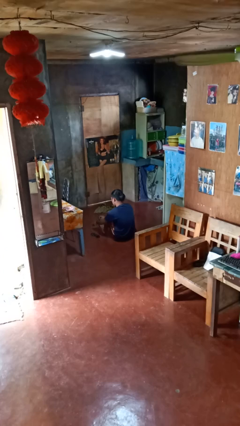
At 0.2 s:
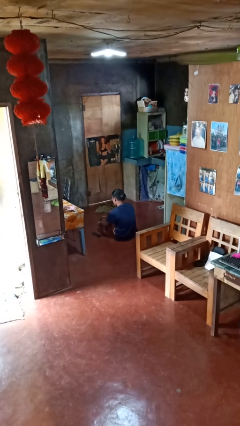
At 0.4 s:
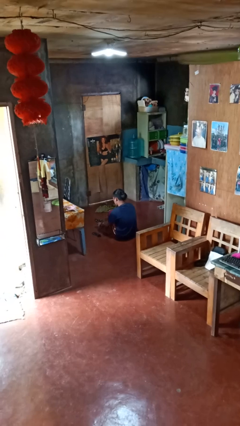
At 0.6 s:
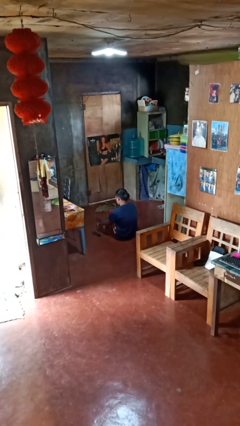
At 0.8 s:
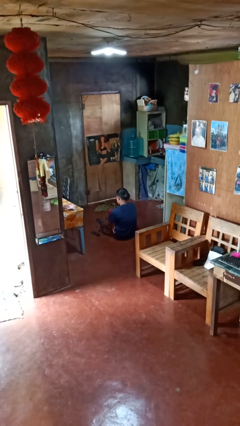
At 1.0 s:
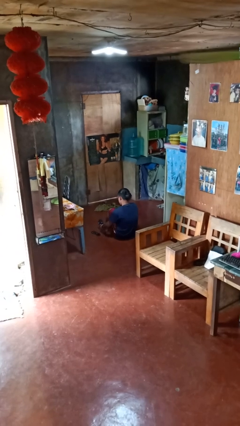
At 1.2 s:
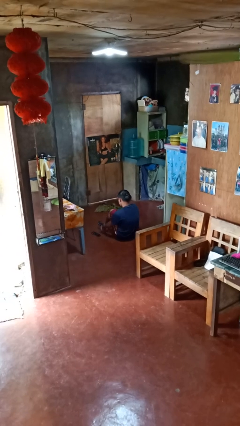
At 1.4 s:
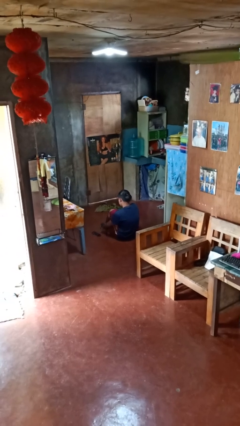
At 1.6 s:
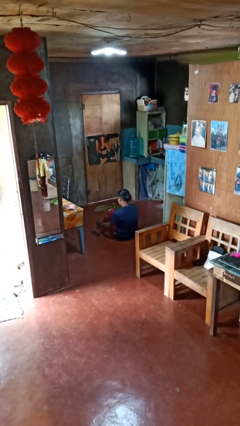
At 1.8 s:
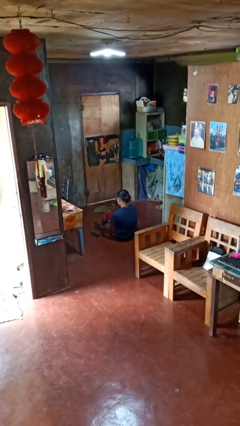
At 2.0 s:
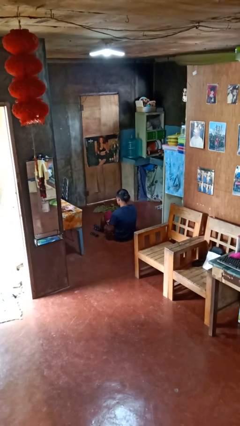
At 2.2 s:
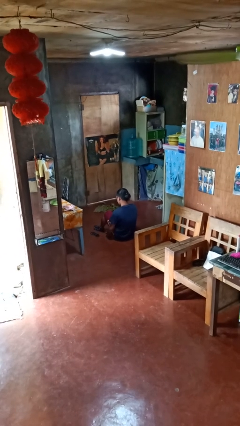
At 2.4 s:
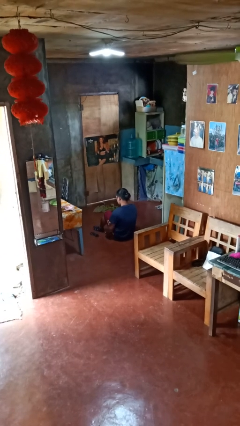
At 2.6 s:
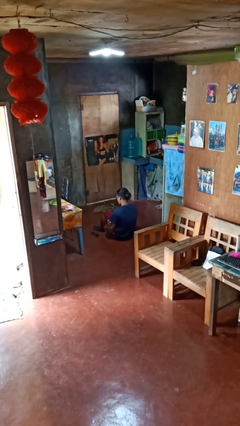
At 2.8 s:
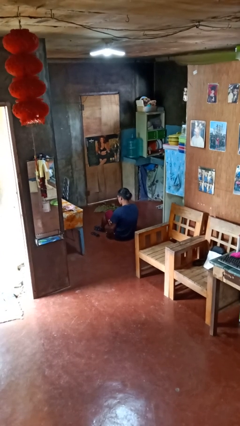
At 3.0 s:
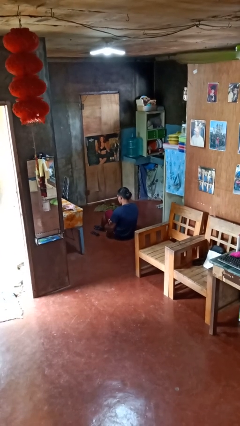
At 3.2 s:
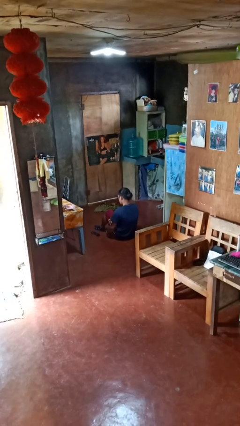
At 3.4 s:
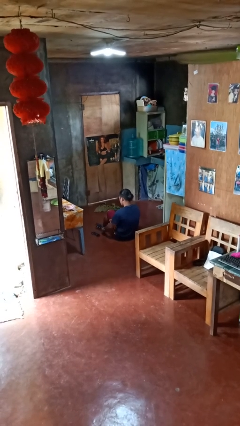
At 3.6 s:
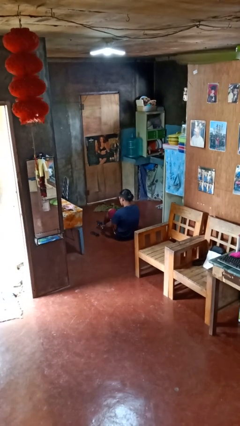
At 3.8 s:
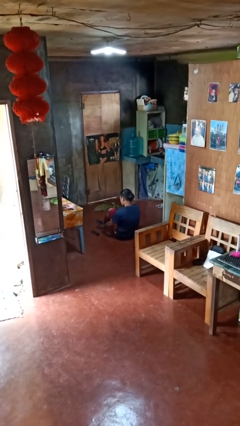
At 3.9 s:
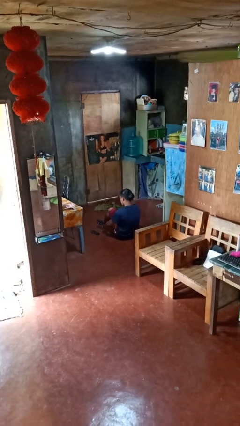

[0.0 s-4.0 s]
person puts on socks

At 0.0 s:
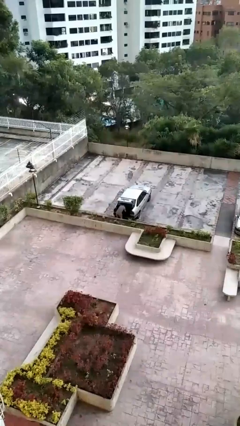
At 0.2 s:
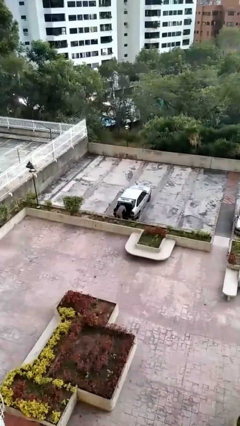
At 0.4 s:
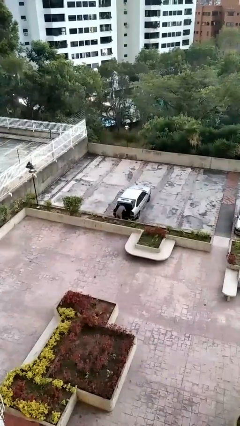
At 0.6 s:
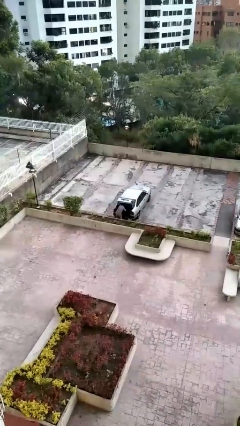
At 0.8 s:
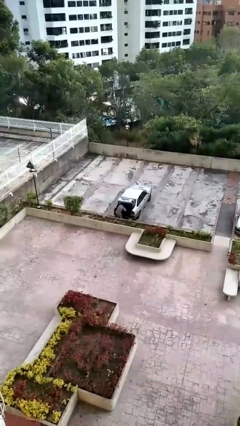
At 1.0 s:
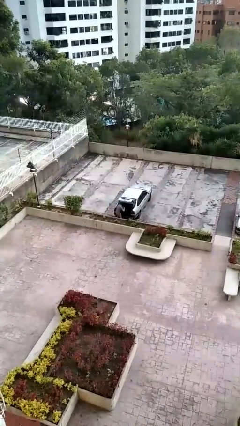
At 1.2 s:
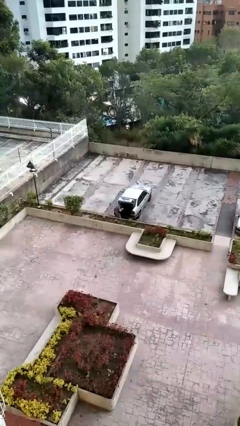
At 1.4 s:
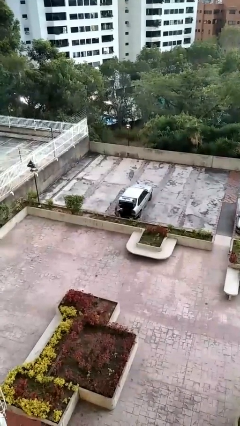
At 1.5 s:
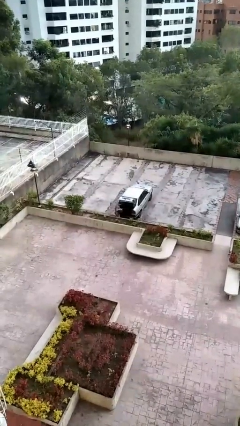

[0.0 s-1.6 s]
person unloads car

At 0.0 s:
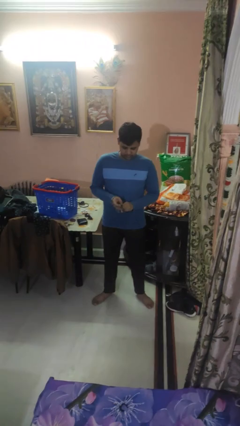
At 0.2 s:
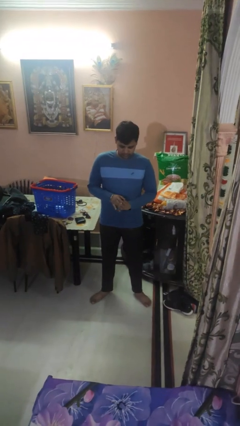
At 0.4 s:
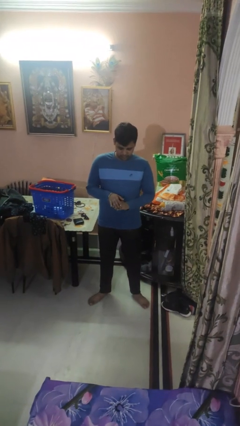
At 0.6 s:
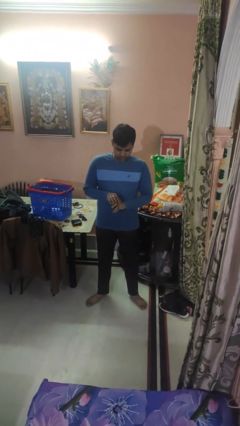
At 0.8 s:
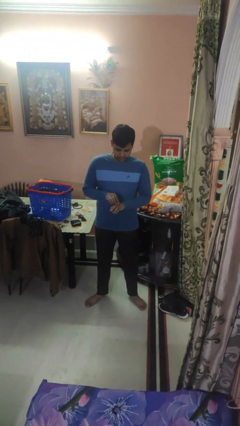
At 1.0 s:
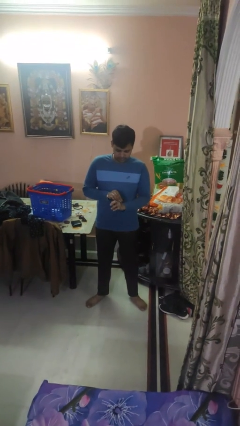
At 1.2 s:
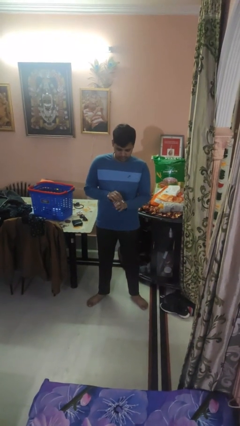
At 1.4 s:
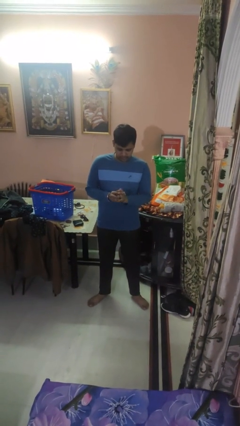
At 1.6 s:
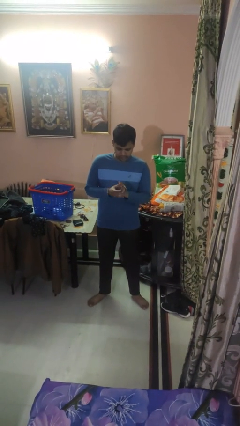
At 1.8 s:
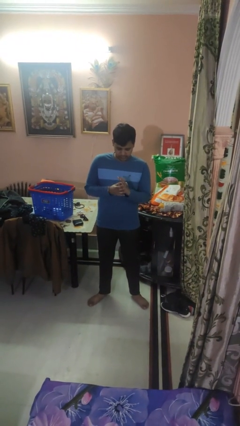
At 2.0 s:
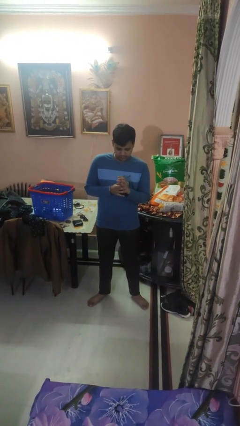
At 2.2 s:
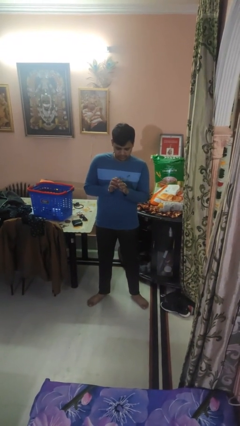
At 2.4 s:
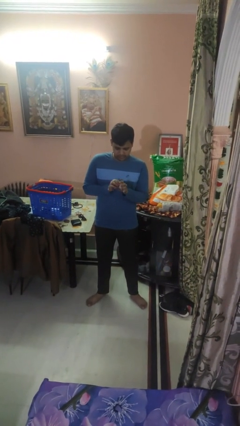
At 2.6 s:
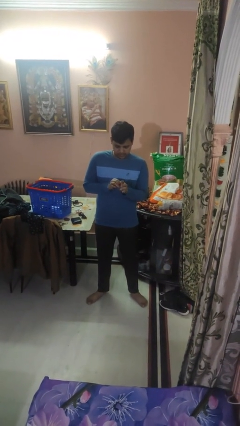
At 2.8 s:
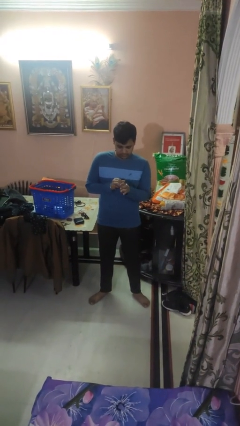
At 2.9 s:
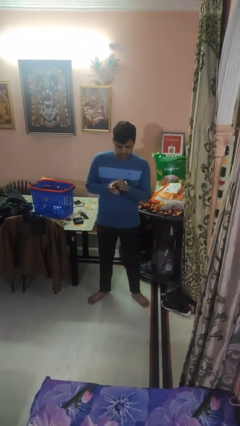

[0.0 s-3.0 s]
person puts on wristwatch

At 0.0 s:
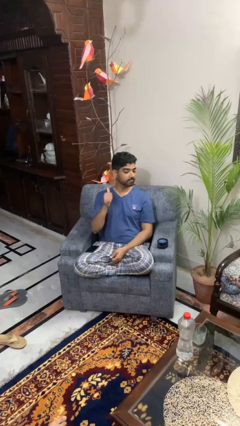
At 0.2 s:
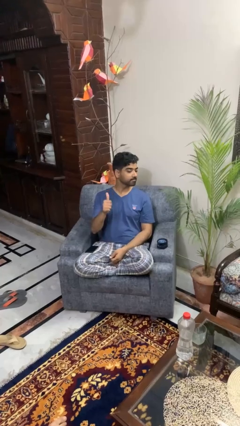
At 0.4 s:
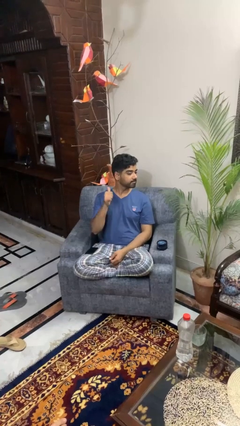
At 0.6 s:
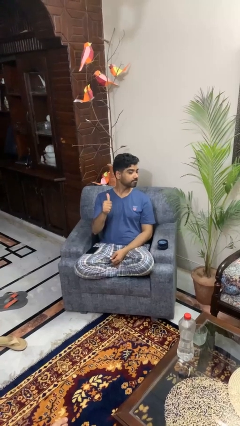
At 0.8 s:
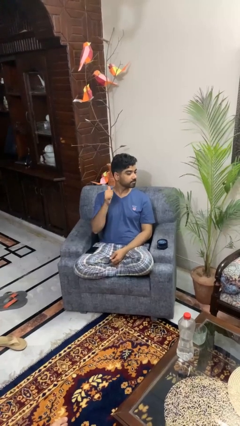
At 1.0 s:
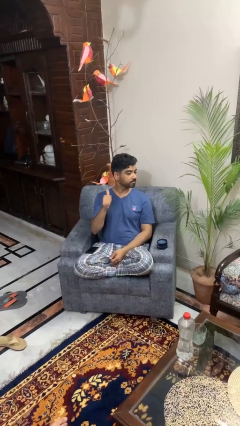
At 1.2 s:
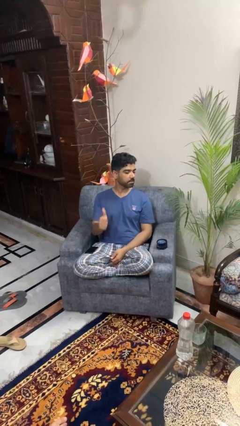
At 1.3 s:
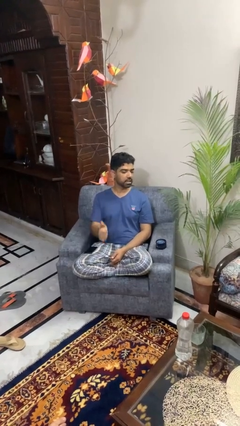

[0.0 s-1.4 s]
person gestures behind me

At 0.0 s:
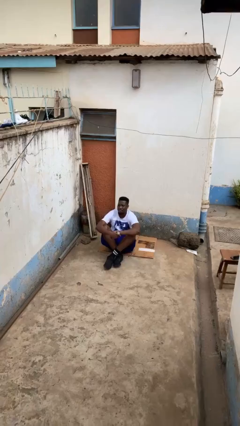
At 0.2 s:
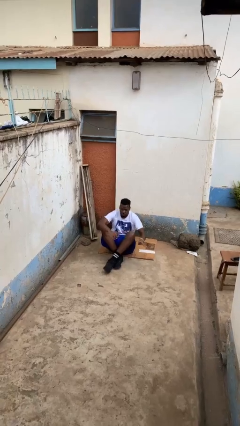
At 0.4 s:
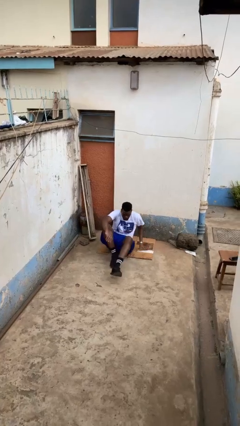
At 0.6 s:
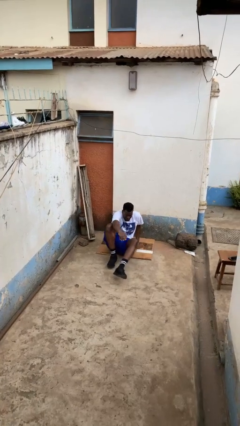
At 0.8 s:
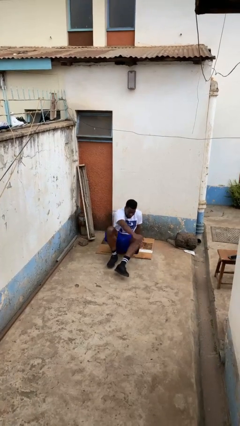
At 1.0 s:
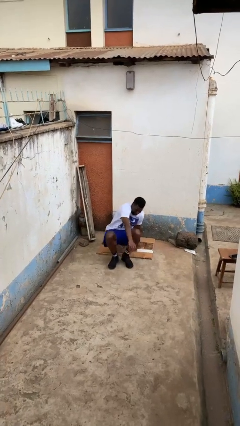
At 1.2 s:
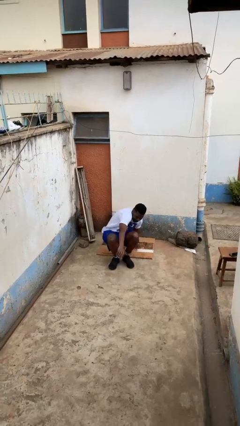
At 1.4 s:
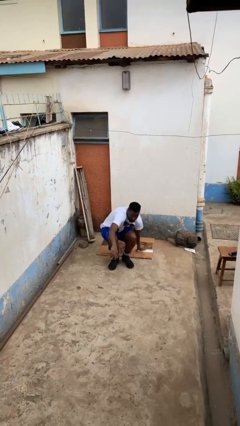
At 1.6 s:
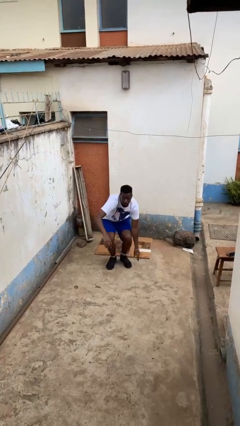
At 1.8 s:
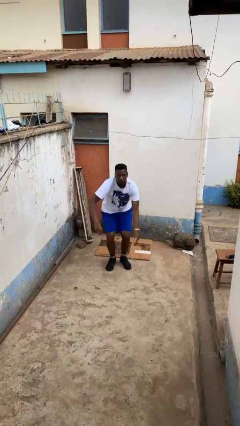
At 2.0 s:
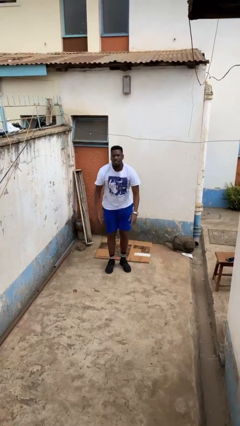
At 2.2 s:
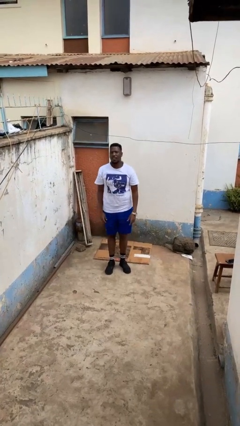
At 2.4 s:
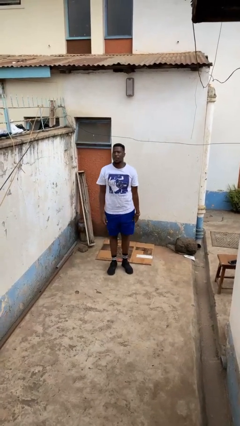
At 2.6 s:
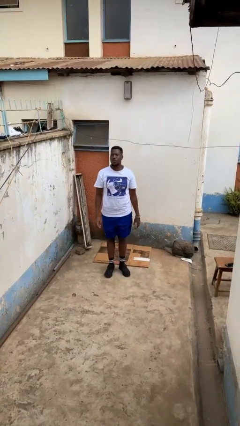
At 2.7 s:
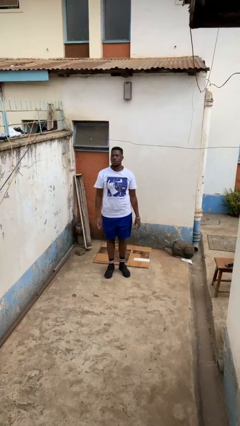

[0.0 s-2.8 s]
person stands up from floor

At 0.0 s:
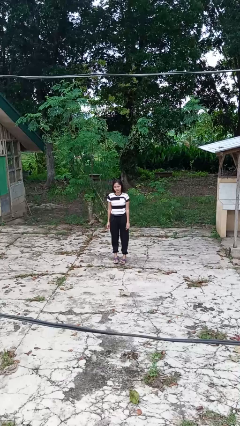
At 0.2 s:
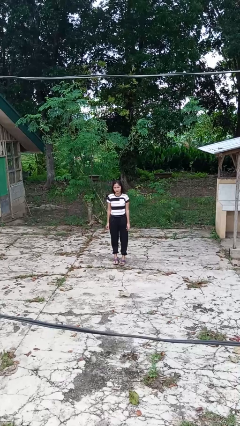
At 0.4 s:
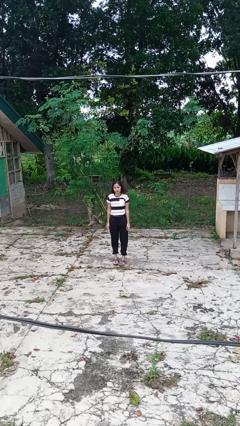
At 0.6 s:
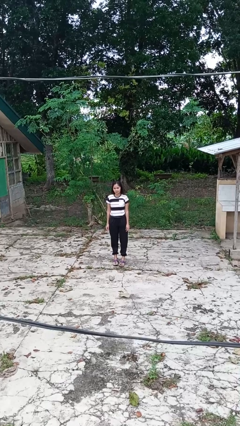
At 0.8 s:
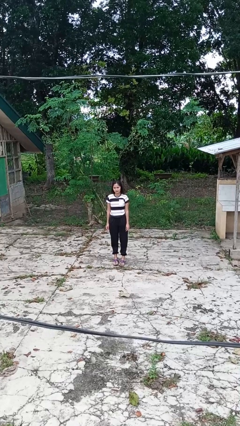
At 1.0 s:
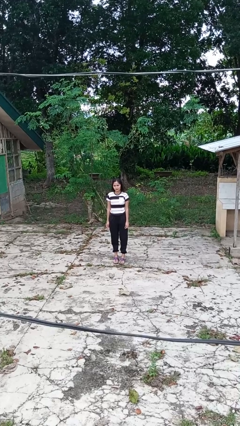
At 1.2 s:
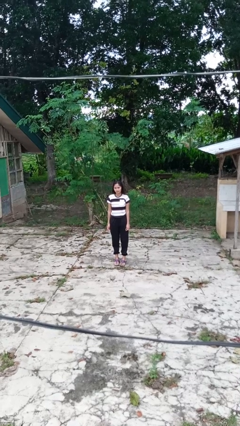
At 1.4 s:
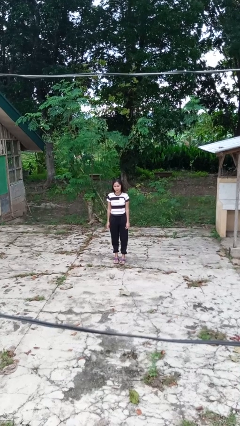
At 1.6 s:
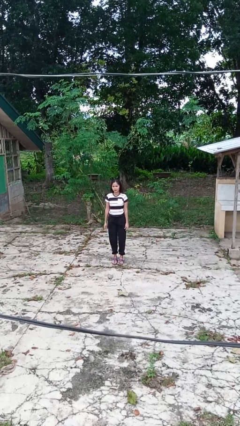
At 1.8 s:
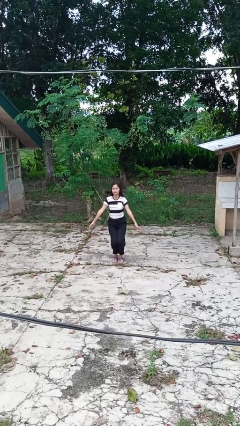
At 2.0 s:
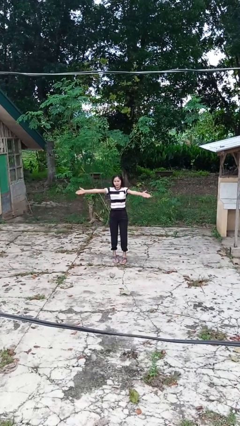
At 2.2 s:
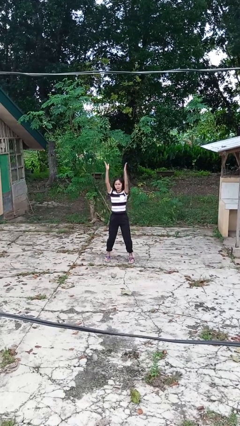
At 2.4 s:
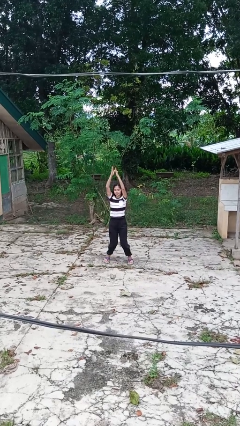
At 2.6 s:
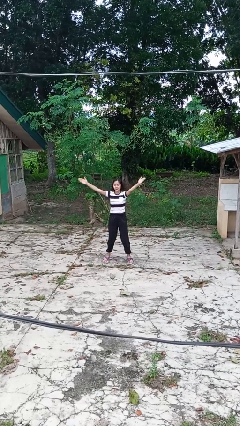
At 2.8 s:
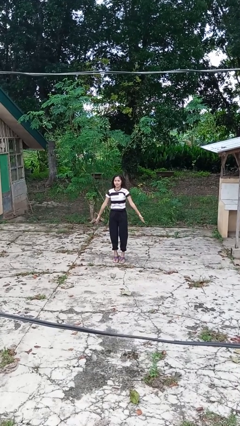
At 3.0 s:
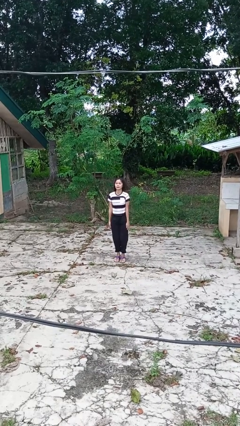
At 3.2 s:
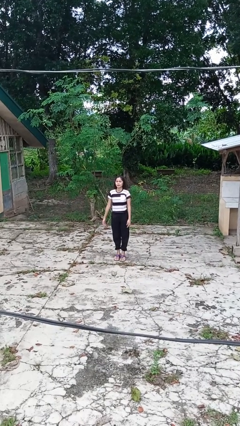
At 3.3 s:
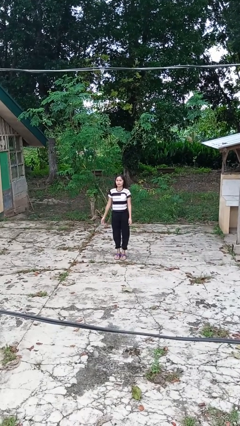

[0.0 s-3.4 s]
person exercises with jumping jacks

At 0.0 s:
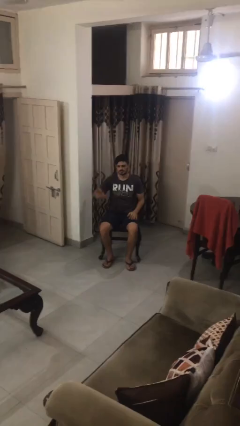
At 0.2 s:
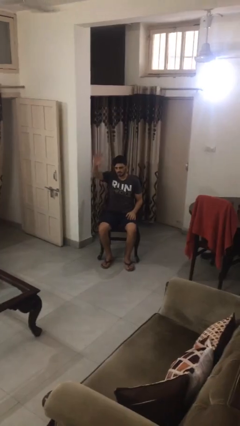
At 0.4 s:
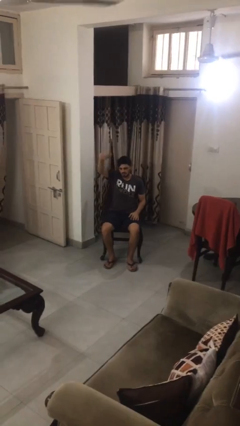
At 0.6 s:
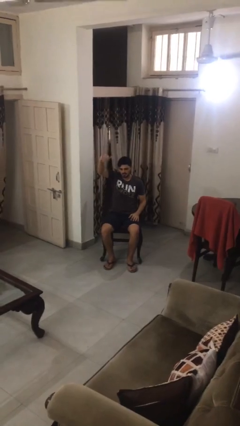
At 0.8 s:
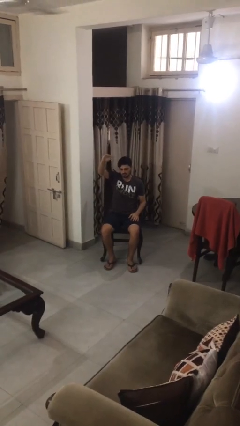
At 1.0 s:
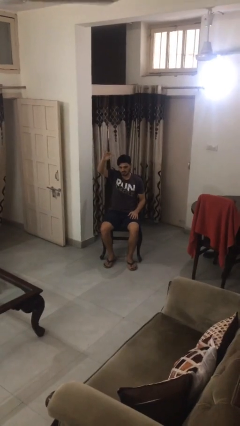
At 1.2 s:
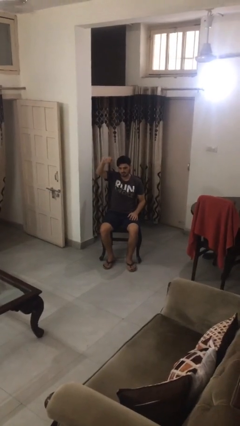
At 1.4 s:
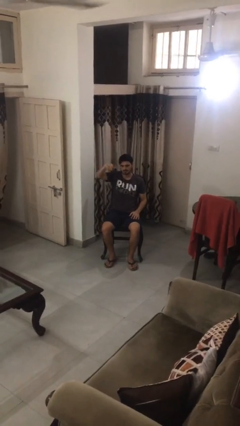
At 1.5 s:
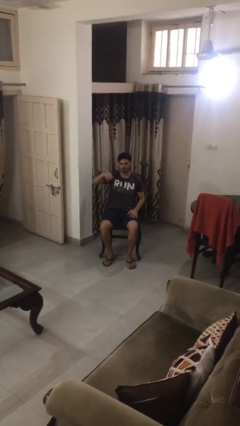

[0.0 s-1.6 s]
person gestures come here
